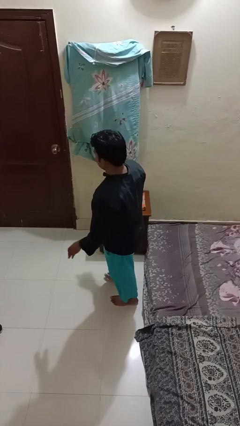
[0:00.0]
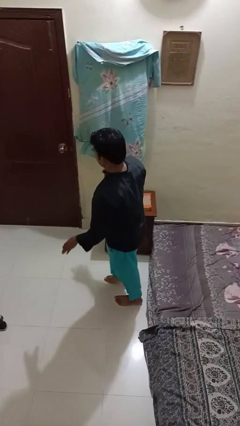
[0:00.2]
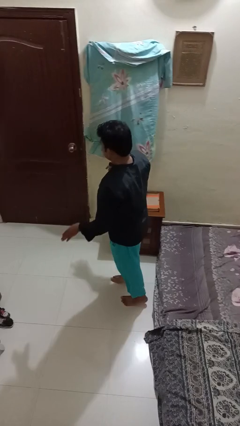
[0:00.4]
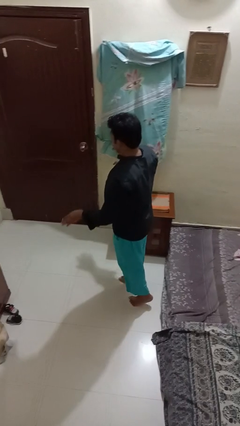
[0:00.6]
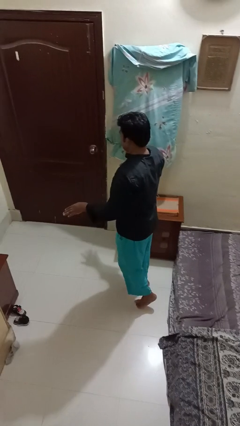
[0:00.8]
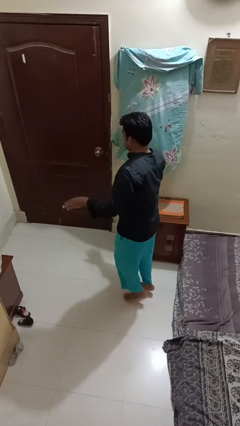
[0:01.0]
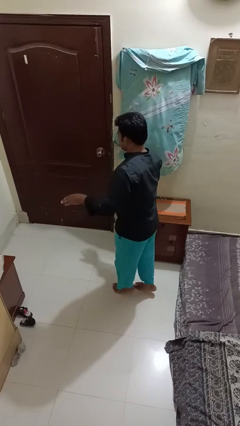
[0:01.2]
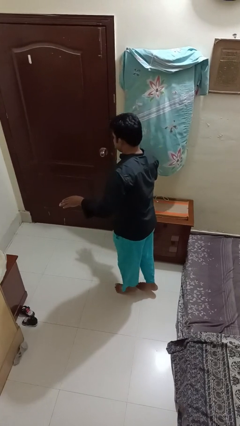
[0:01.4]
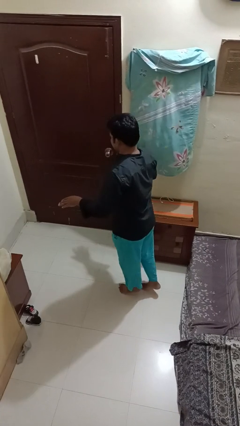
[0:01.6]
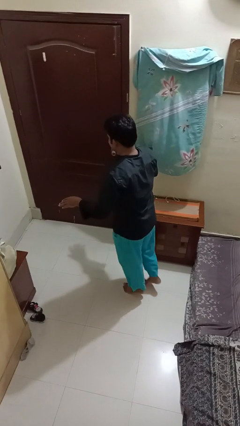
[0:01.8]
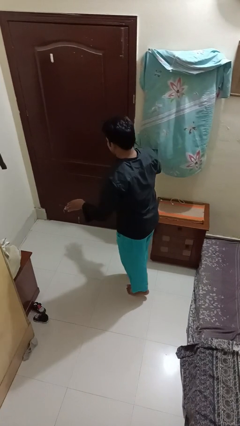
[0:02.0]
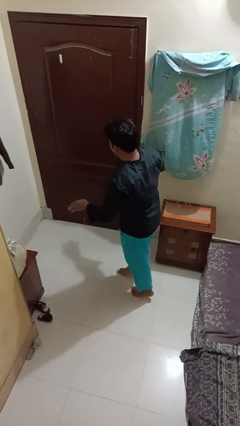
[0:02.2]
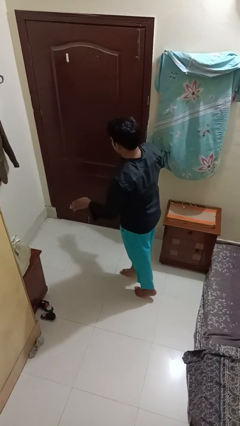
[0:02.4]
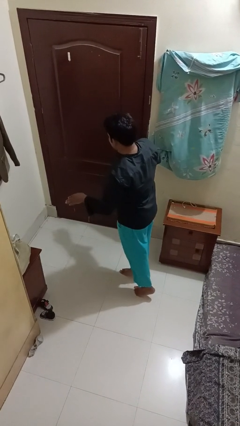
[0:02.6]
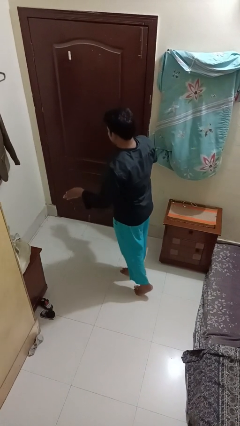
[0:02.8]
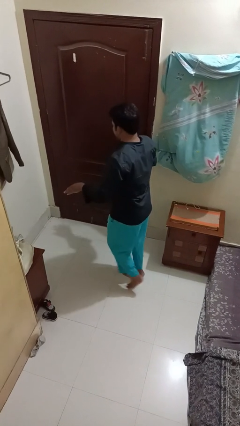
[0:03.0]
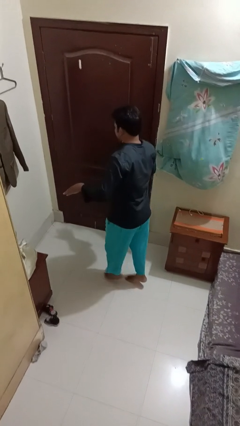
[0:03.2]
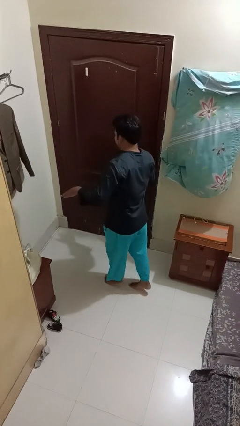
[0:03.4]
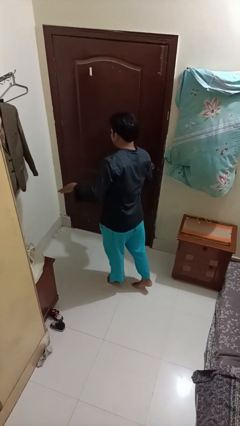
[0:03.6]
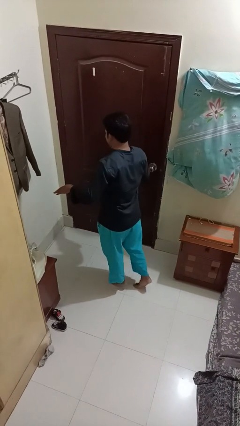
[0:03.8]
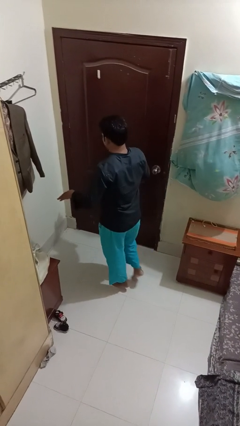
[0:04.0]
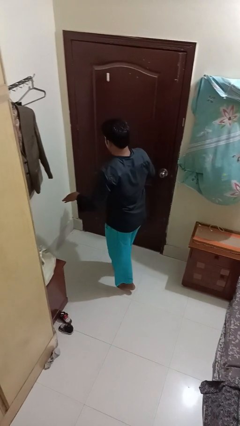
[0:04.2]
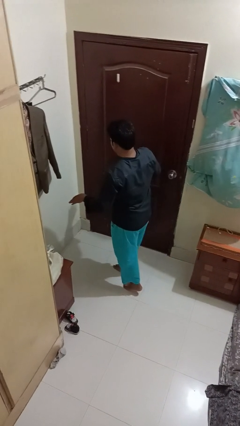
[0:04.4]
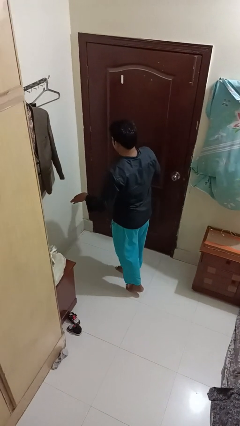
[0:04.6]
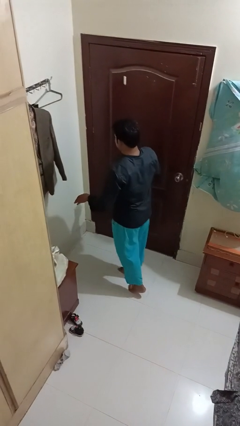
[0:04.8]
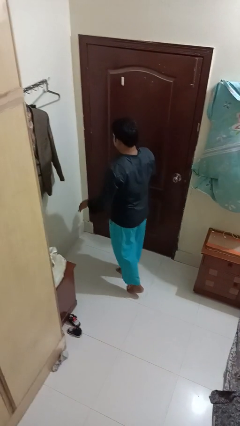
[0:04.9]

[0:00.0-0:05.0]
person walks tiptoe

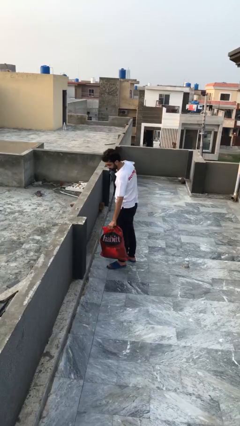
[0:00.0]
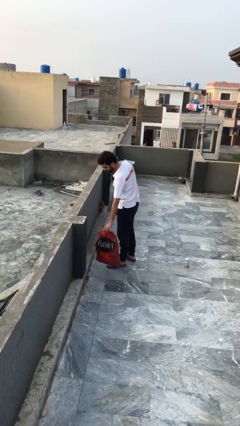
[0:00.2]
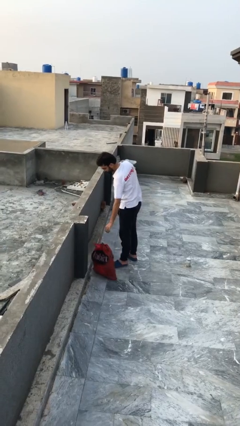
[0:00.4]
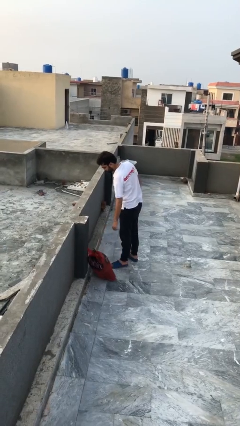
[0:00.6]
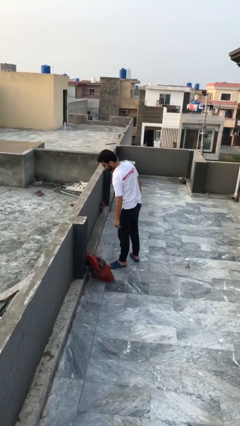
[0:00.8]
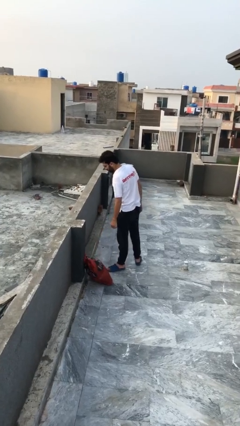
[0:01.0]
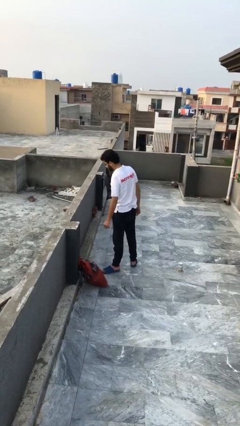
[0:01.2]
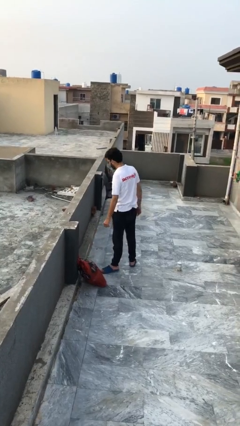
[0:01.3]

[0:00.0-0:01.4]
person puts down object on floor

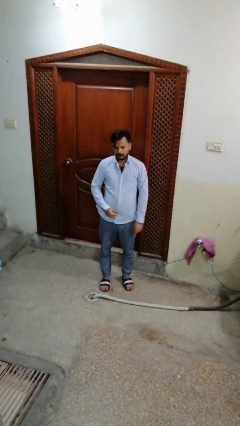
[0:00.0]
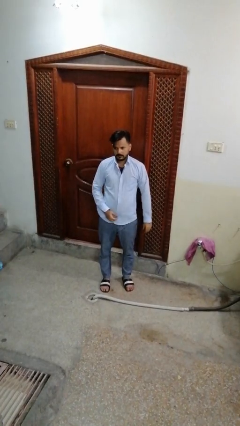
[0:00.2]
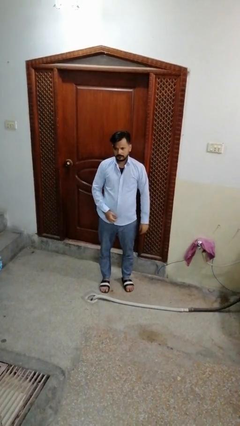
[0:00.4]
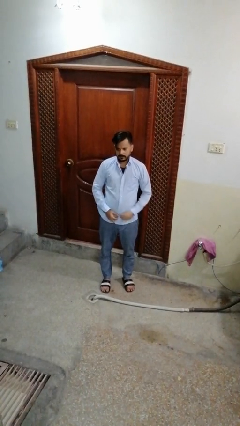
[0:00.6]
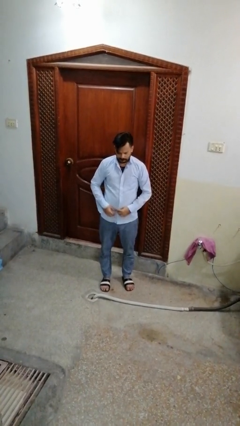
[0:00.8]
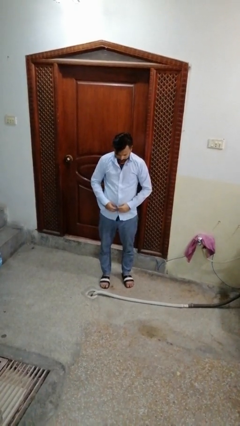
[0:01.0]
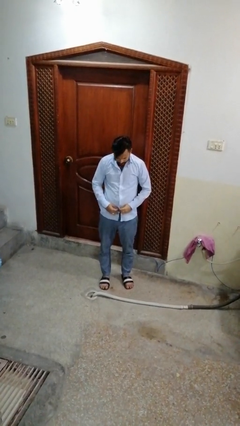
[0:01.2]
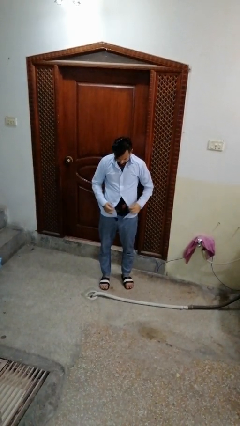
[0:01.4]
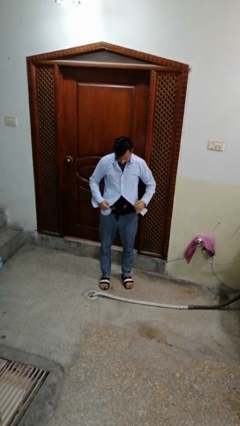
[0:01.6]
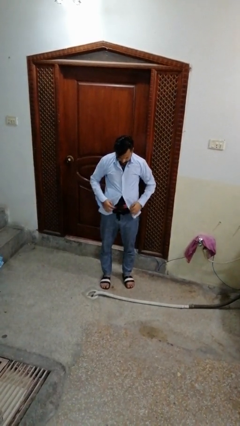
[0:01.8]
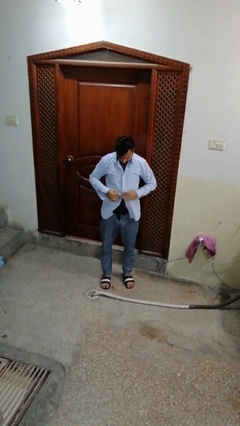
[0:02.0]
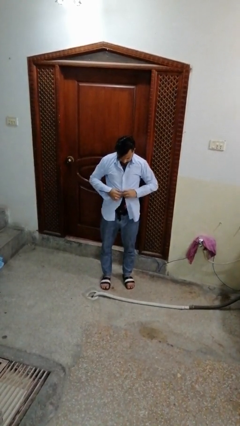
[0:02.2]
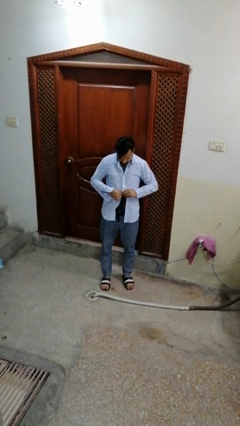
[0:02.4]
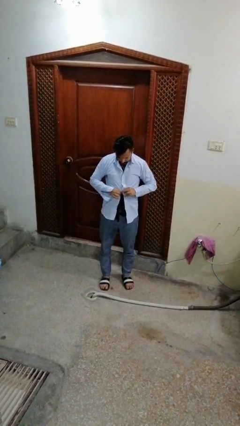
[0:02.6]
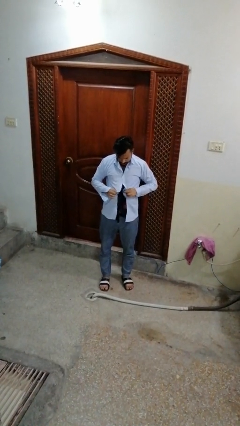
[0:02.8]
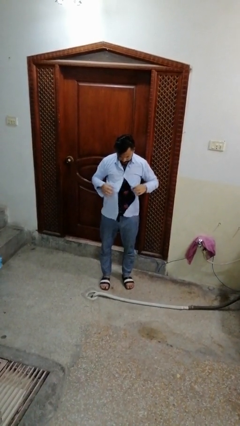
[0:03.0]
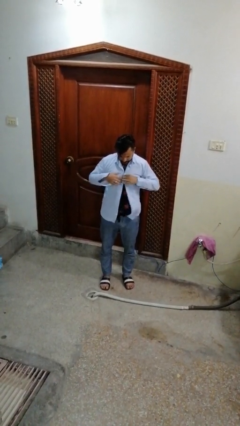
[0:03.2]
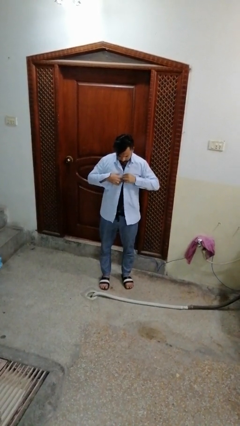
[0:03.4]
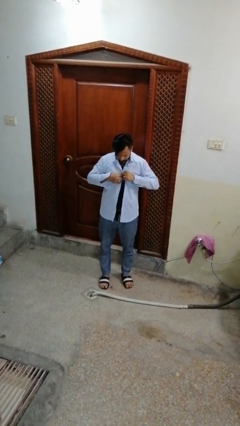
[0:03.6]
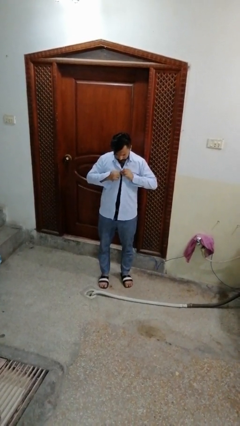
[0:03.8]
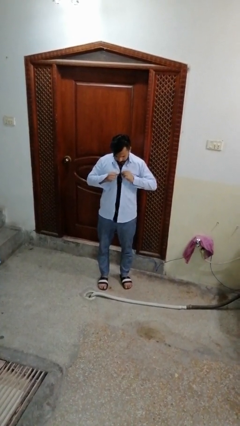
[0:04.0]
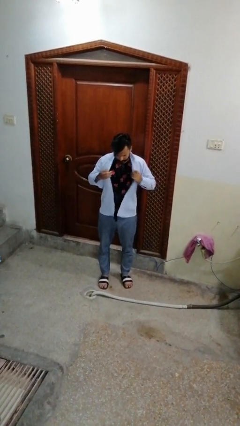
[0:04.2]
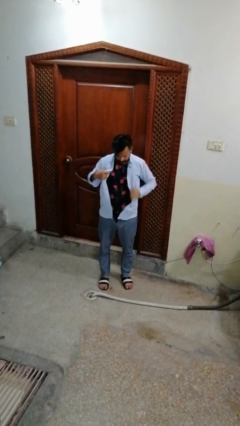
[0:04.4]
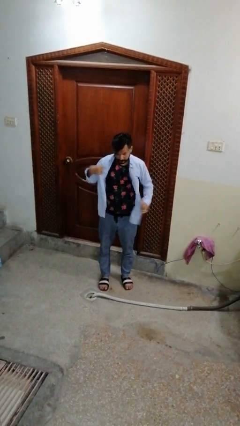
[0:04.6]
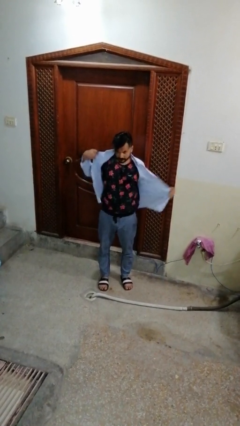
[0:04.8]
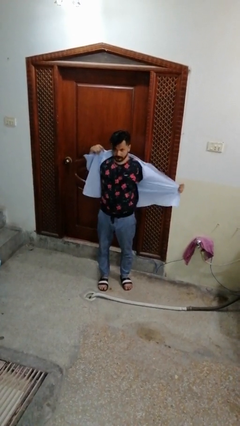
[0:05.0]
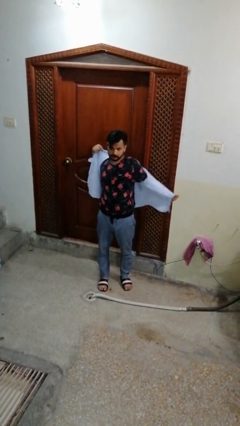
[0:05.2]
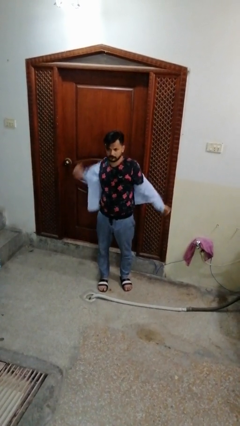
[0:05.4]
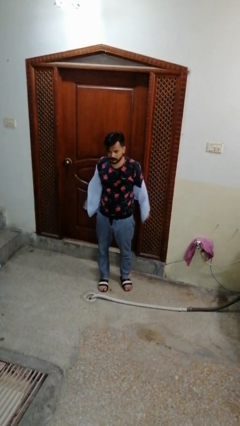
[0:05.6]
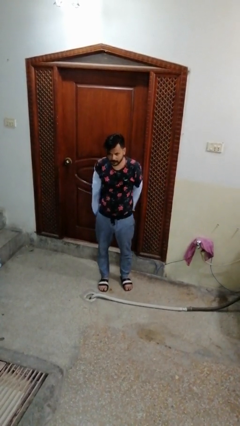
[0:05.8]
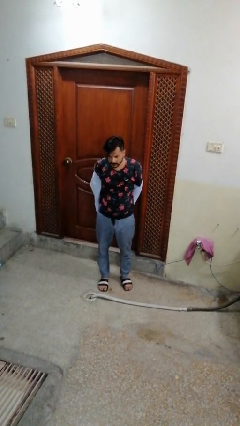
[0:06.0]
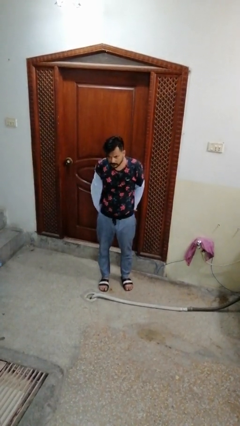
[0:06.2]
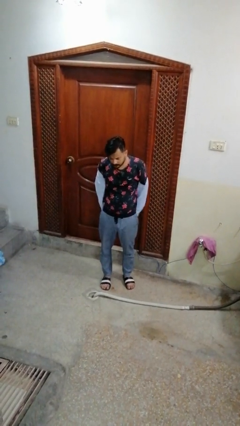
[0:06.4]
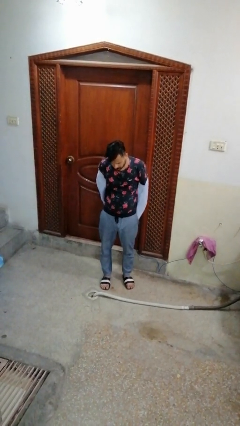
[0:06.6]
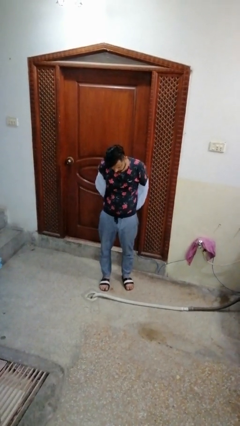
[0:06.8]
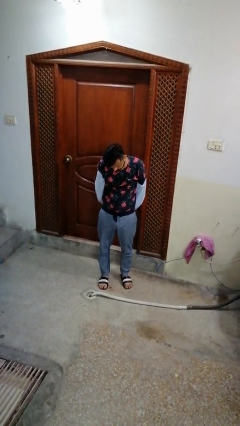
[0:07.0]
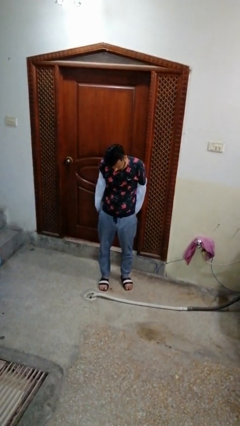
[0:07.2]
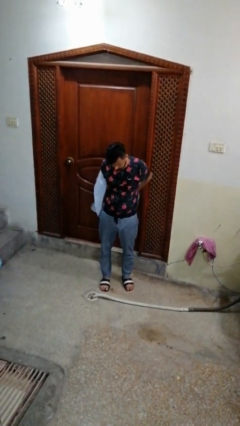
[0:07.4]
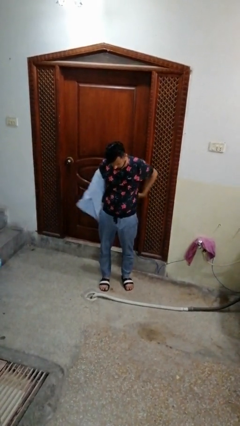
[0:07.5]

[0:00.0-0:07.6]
person takes off shirt

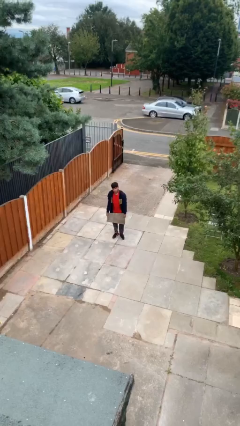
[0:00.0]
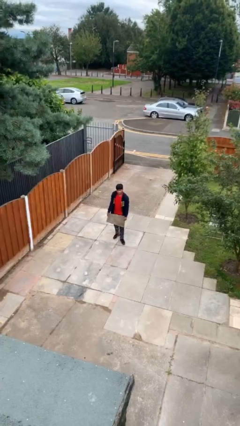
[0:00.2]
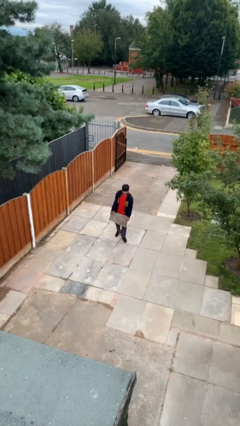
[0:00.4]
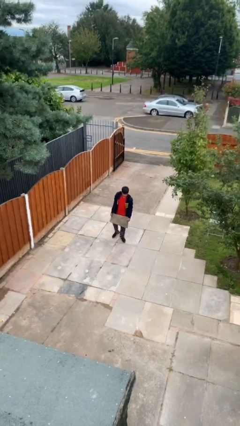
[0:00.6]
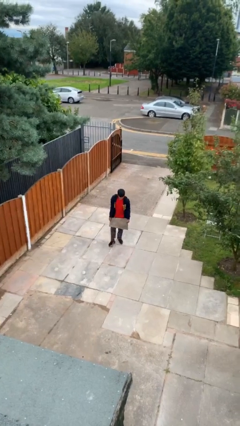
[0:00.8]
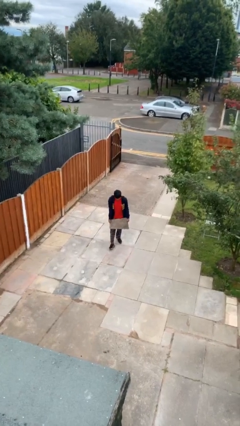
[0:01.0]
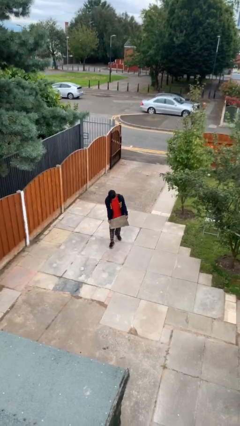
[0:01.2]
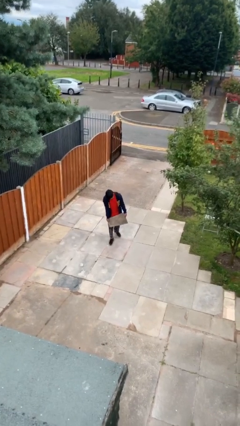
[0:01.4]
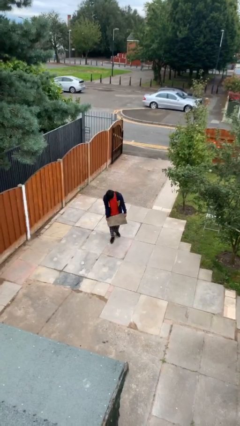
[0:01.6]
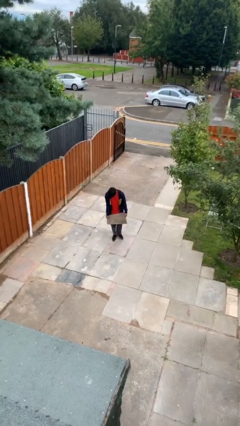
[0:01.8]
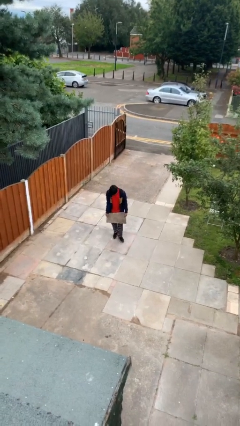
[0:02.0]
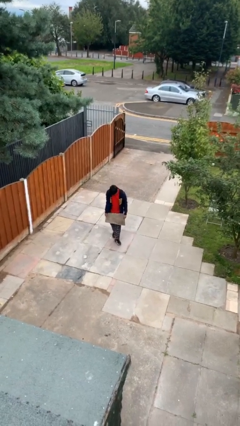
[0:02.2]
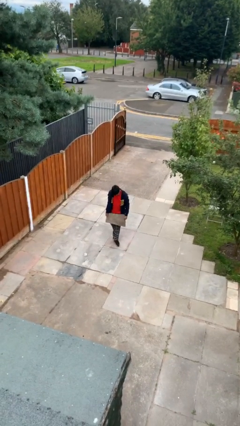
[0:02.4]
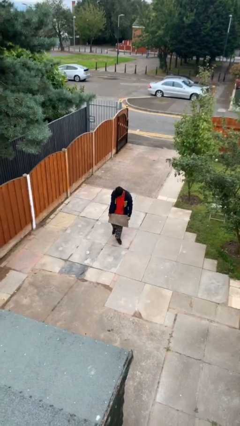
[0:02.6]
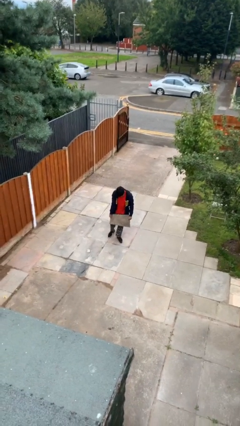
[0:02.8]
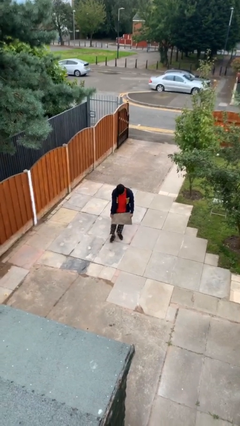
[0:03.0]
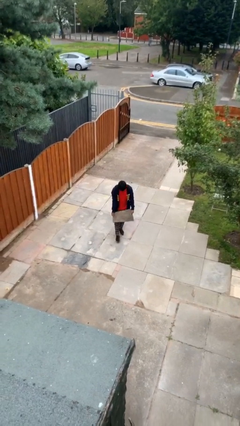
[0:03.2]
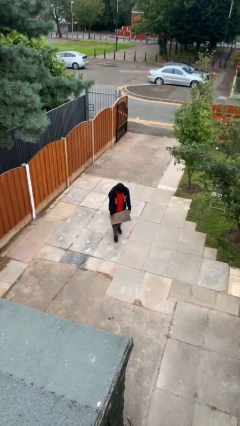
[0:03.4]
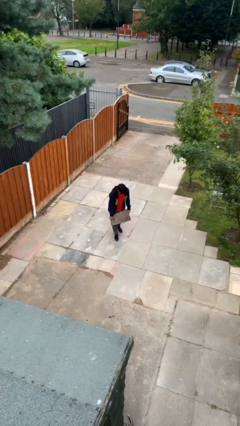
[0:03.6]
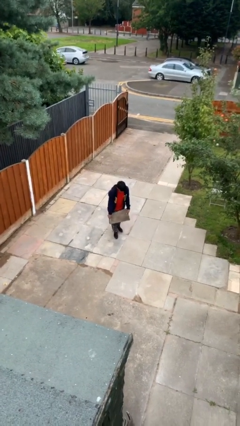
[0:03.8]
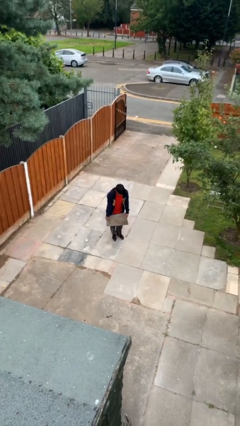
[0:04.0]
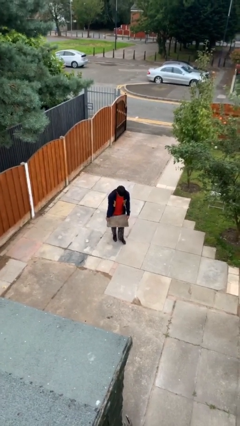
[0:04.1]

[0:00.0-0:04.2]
person carries heavy object
